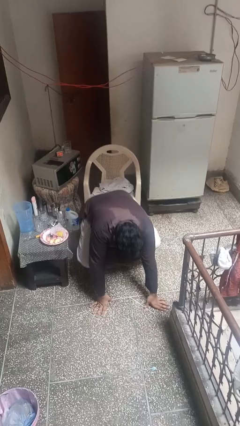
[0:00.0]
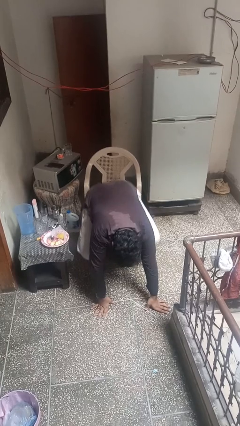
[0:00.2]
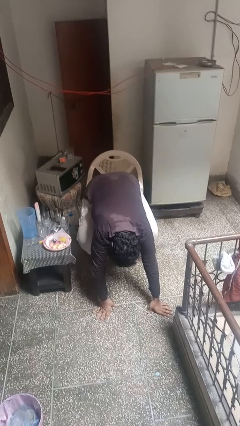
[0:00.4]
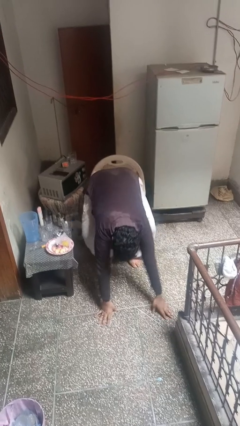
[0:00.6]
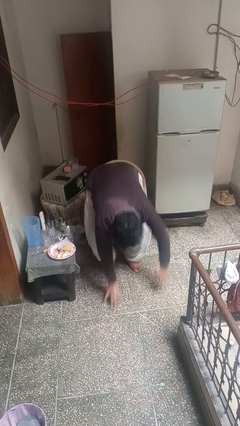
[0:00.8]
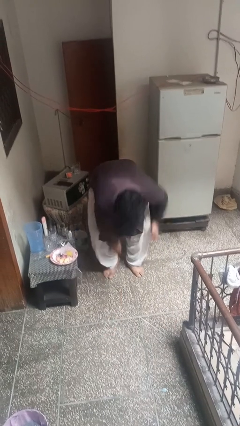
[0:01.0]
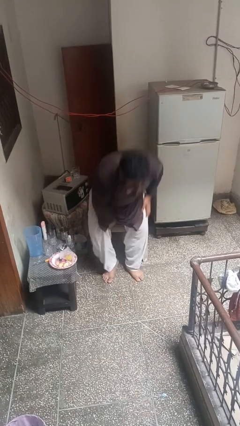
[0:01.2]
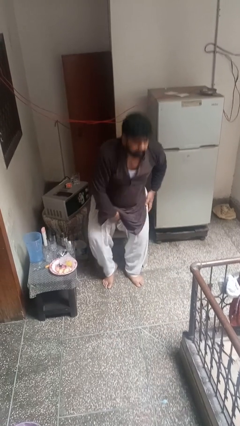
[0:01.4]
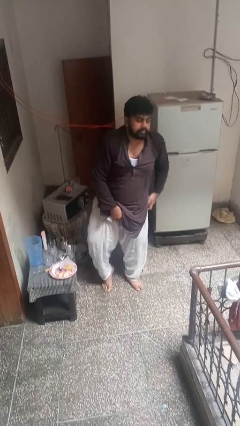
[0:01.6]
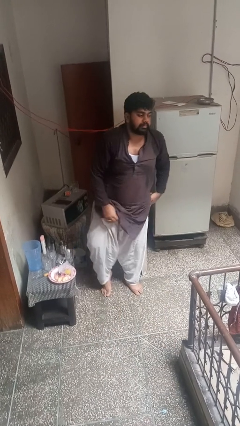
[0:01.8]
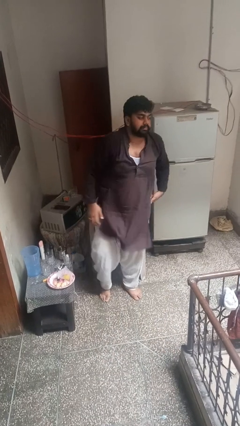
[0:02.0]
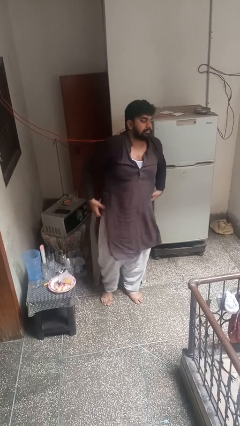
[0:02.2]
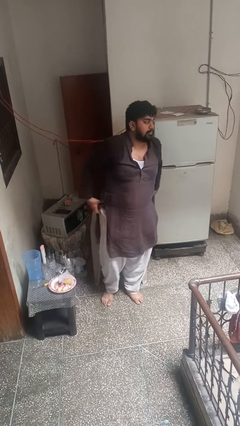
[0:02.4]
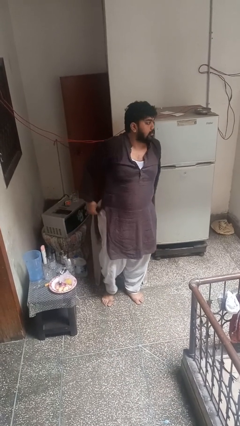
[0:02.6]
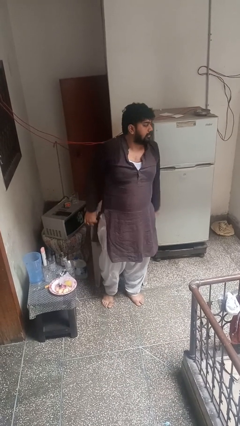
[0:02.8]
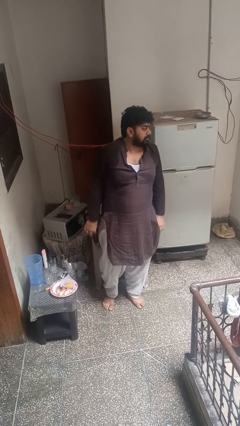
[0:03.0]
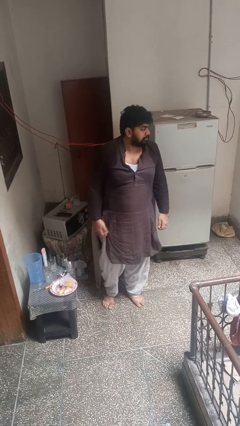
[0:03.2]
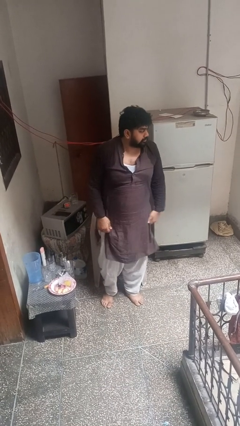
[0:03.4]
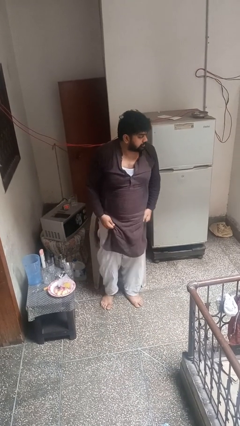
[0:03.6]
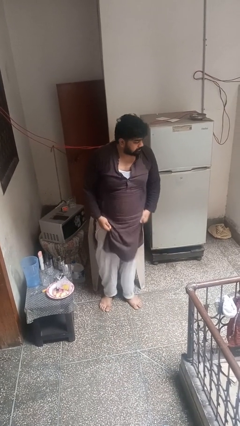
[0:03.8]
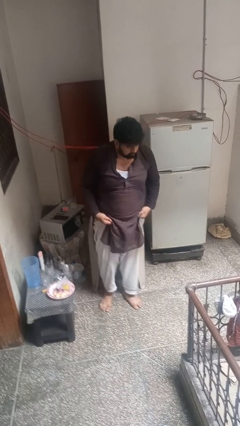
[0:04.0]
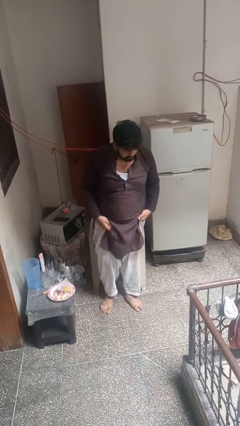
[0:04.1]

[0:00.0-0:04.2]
person stands up from floor

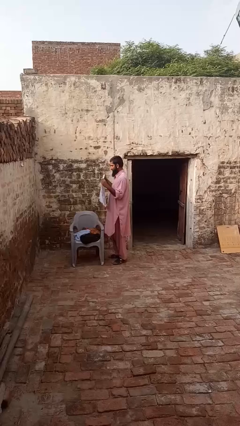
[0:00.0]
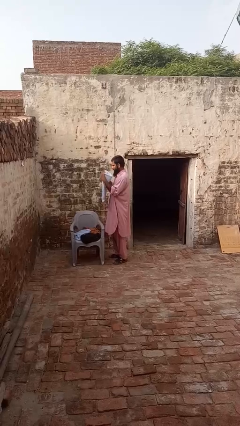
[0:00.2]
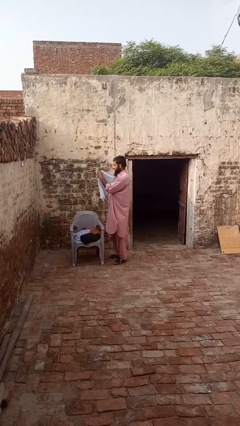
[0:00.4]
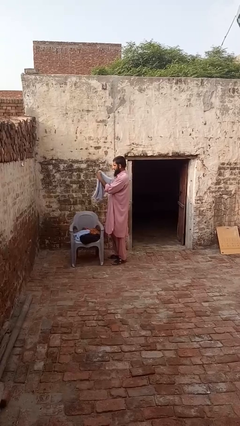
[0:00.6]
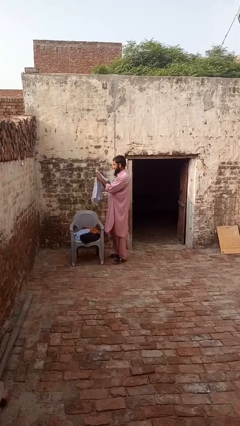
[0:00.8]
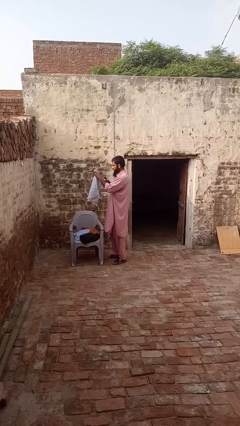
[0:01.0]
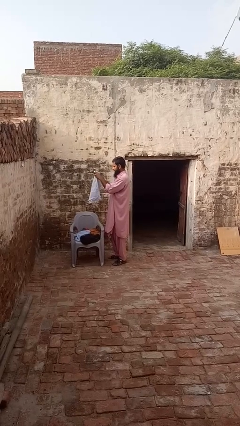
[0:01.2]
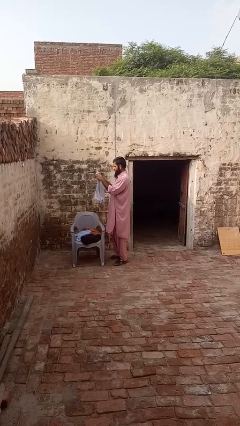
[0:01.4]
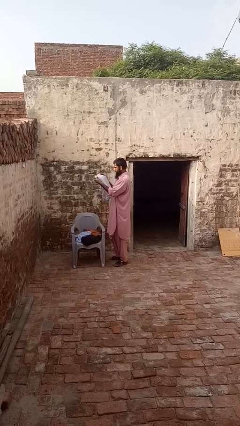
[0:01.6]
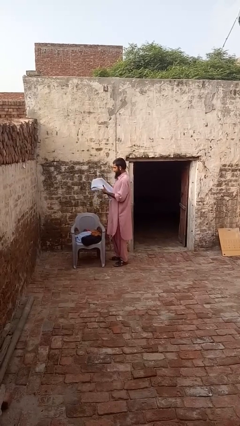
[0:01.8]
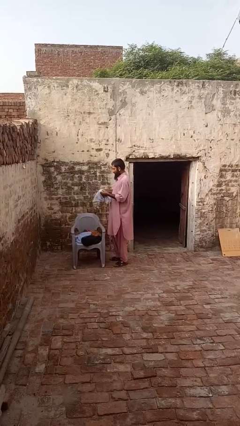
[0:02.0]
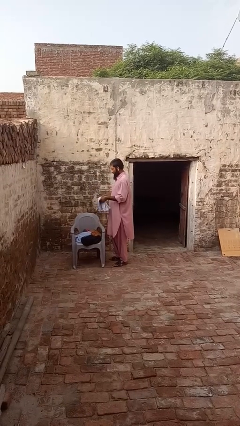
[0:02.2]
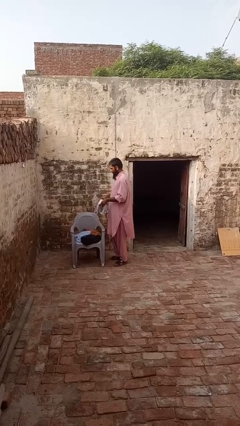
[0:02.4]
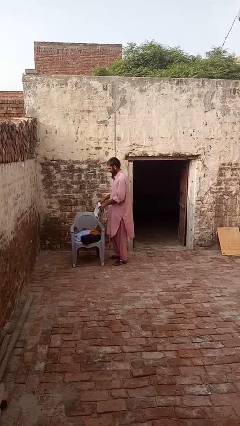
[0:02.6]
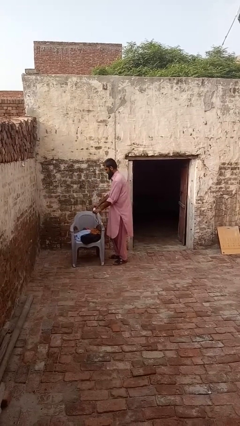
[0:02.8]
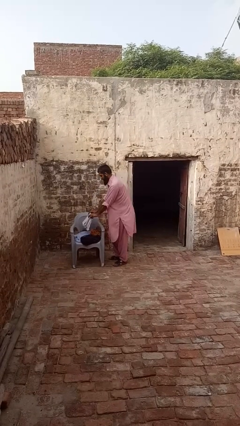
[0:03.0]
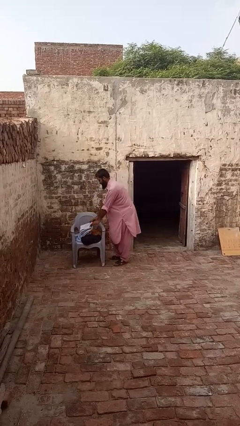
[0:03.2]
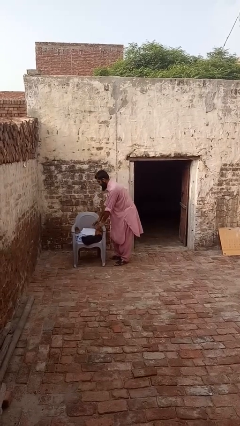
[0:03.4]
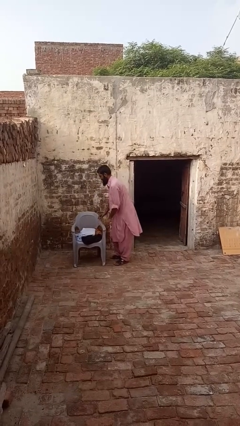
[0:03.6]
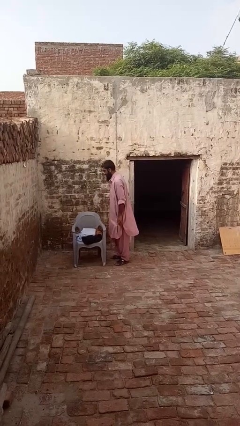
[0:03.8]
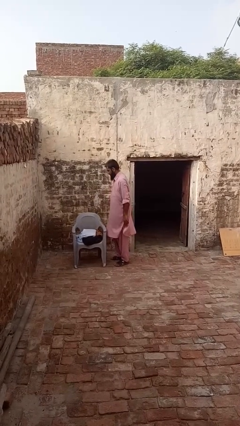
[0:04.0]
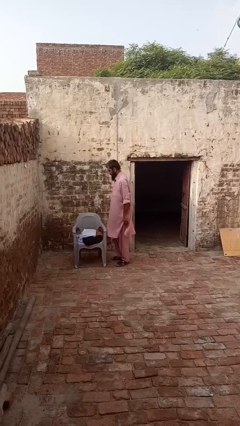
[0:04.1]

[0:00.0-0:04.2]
person folds towel

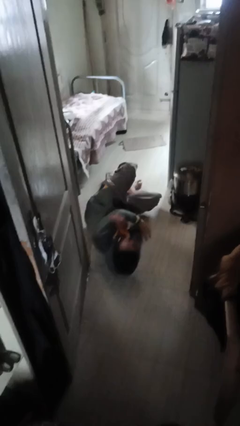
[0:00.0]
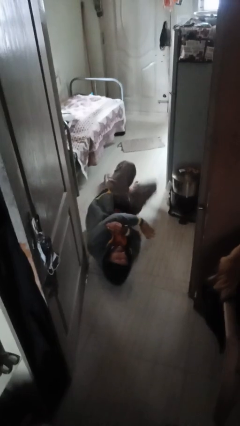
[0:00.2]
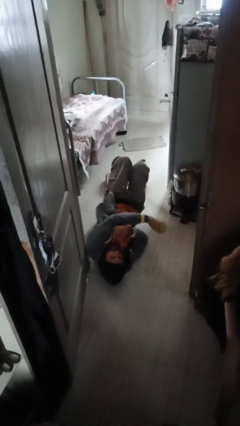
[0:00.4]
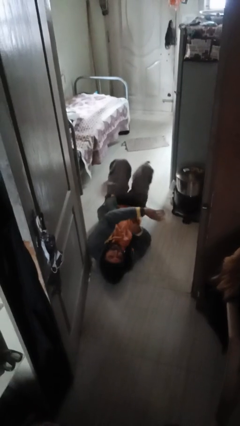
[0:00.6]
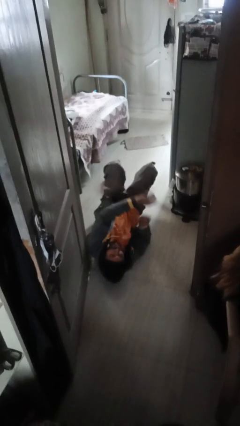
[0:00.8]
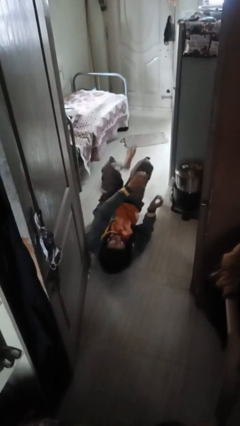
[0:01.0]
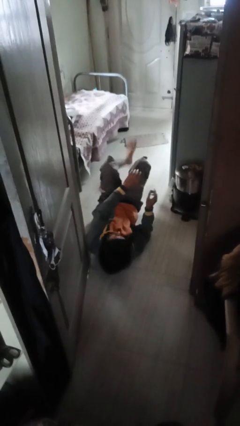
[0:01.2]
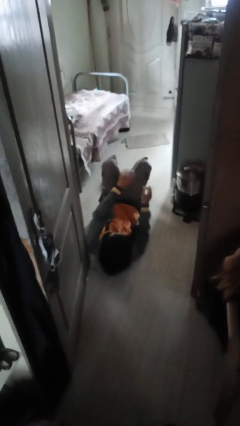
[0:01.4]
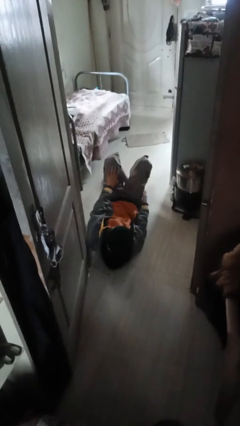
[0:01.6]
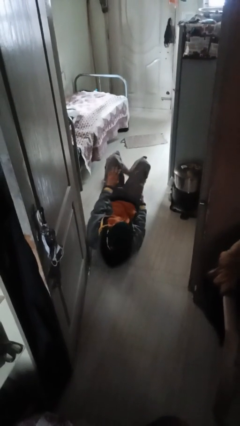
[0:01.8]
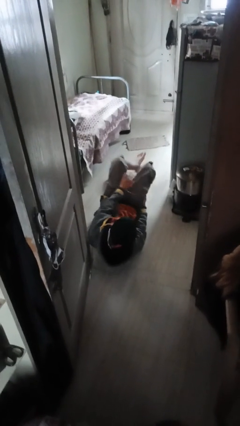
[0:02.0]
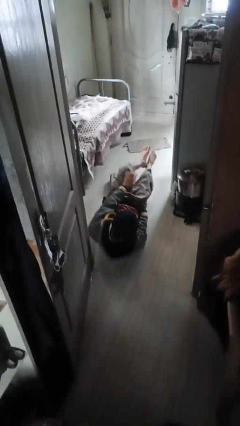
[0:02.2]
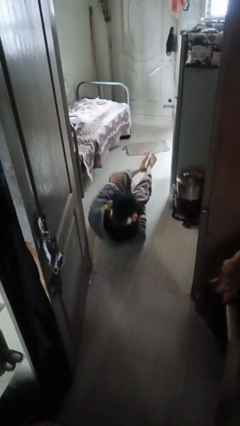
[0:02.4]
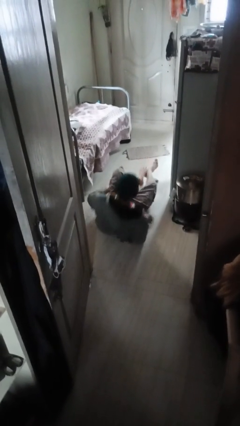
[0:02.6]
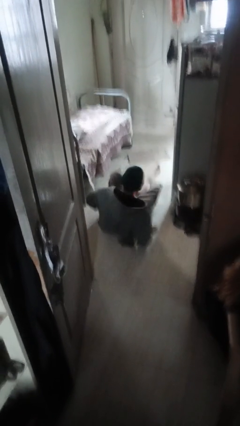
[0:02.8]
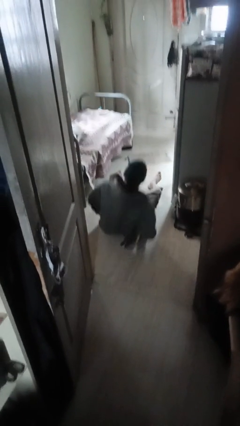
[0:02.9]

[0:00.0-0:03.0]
person lies down on floor

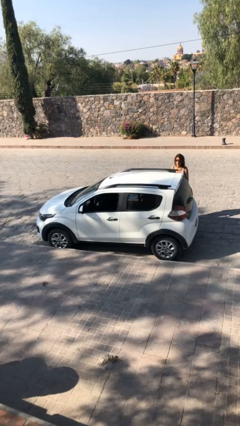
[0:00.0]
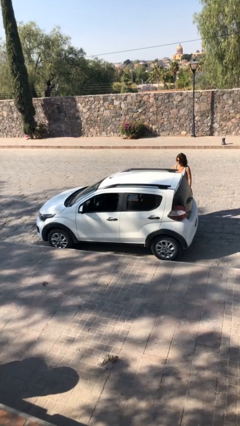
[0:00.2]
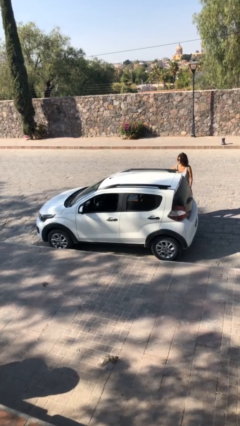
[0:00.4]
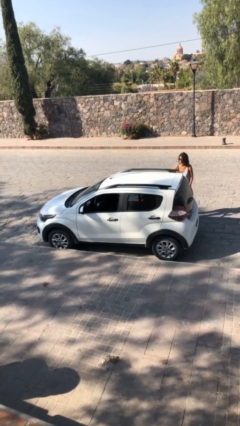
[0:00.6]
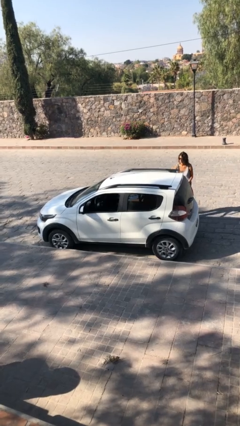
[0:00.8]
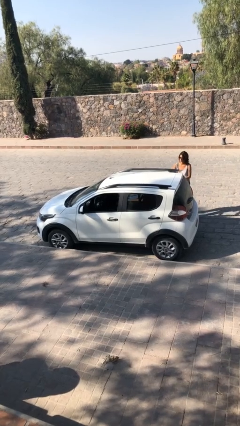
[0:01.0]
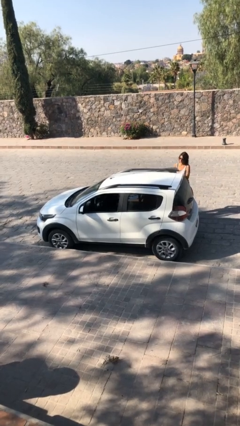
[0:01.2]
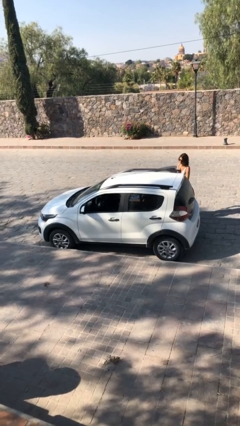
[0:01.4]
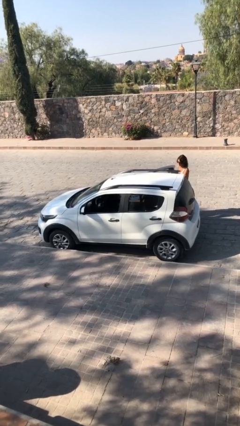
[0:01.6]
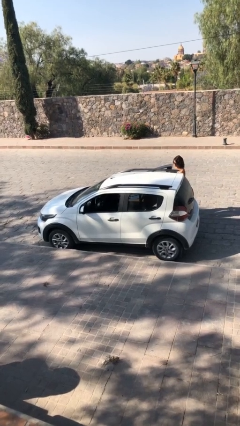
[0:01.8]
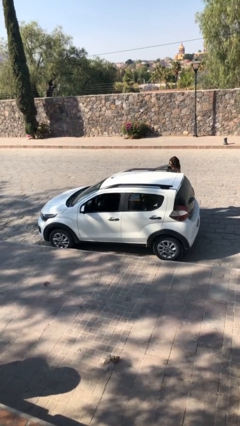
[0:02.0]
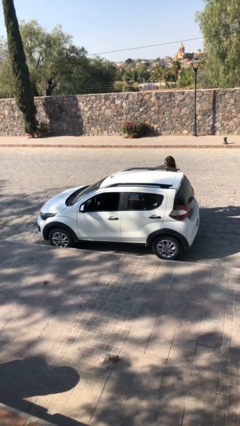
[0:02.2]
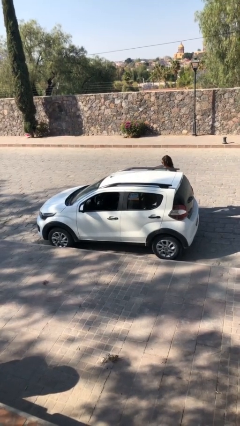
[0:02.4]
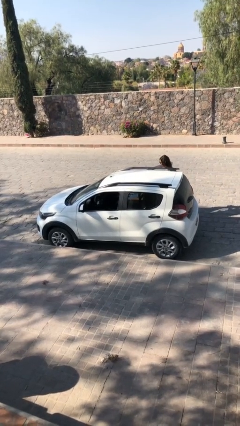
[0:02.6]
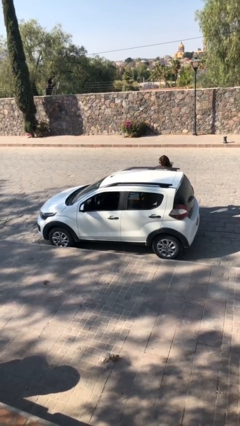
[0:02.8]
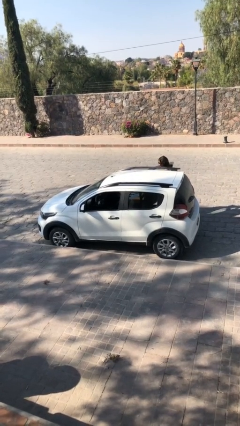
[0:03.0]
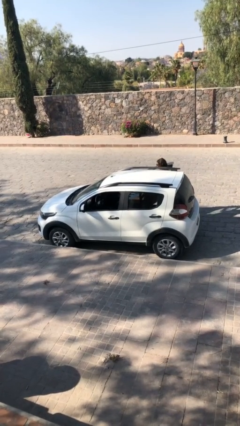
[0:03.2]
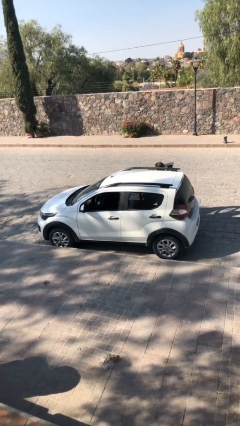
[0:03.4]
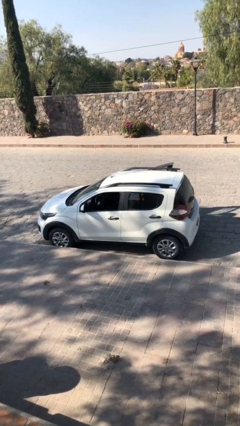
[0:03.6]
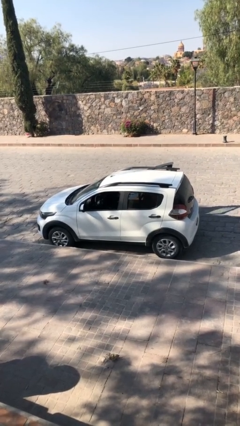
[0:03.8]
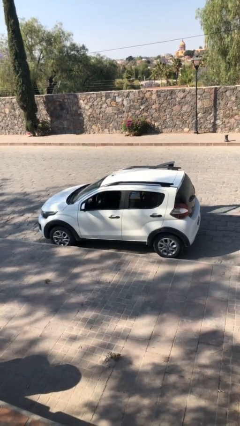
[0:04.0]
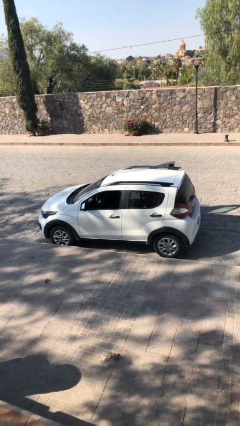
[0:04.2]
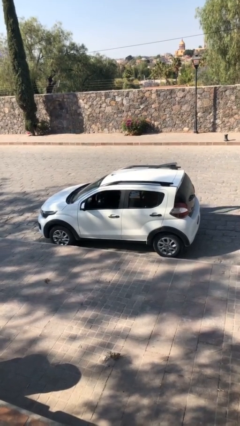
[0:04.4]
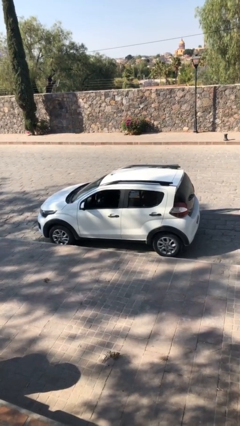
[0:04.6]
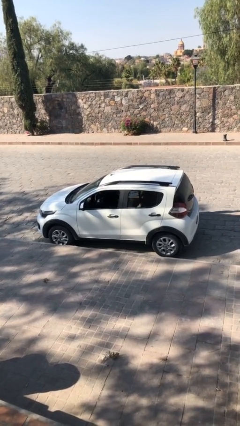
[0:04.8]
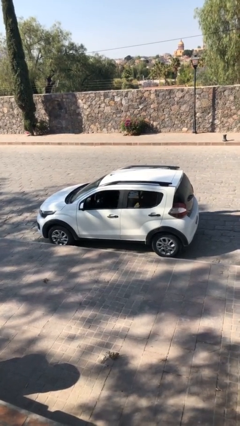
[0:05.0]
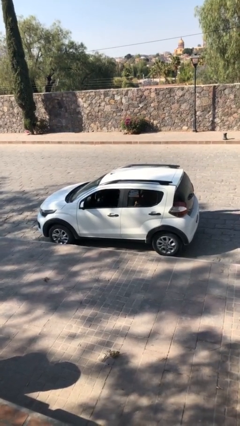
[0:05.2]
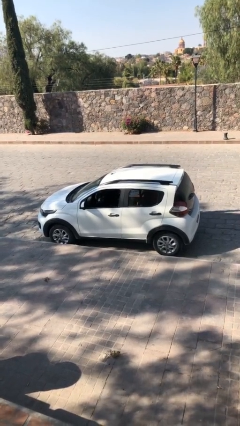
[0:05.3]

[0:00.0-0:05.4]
car picks up person

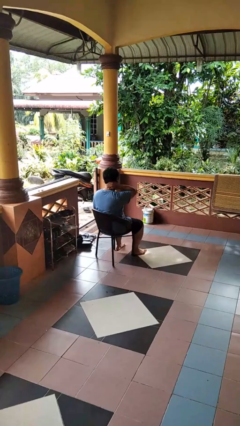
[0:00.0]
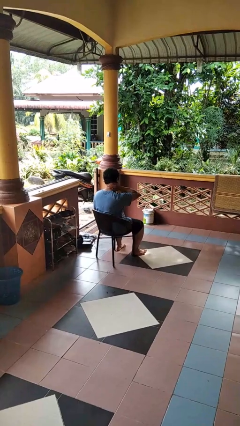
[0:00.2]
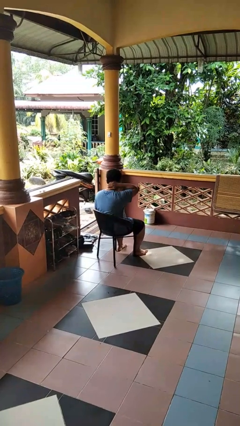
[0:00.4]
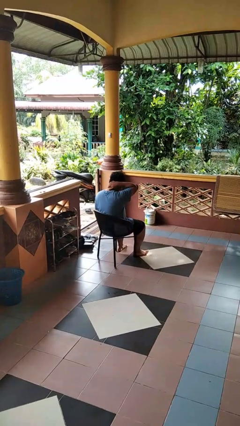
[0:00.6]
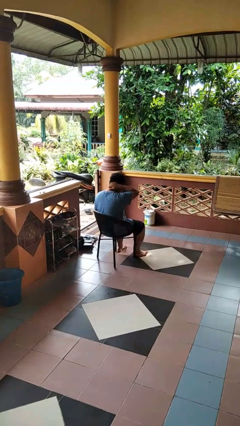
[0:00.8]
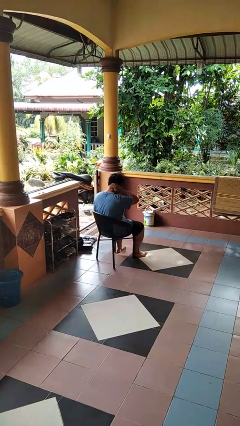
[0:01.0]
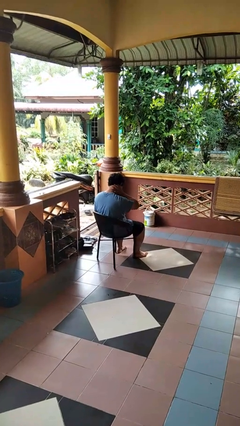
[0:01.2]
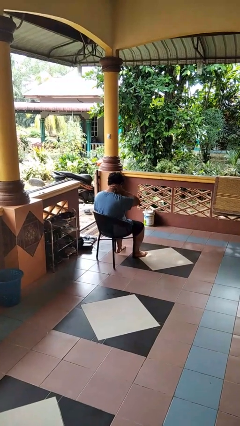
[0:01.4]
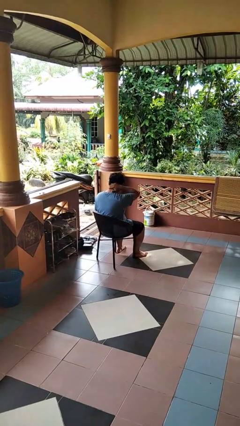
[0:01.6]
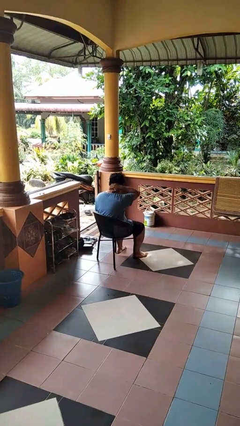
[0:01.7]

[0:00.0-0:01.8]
person rubs neck
